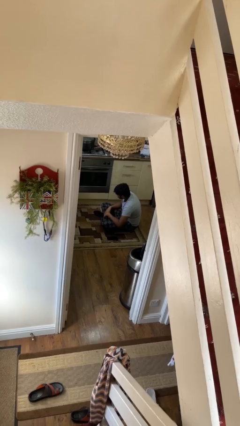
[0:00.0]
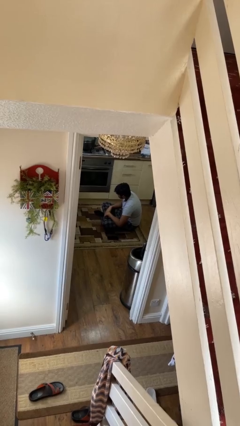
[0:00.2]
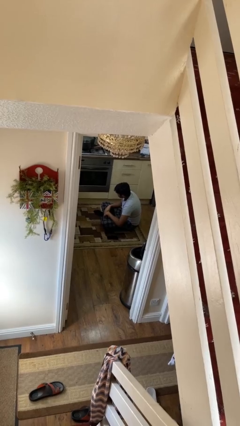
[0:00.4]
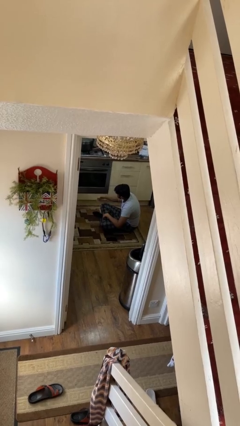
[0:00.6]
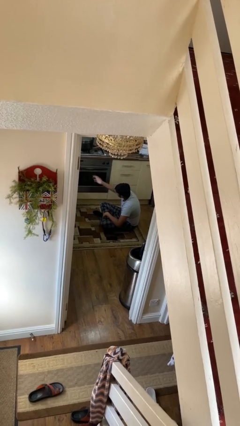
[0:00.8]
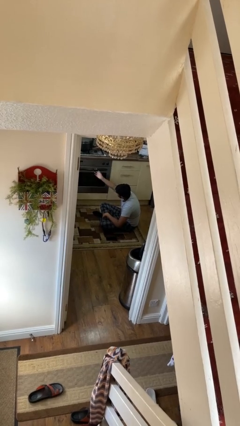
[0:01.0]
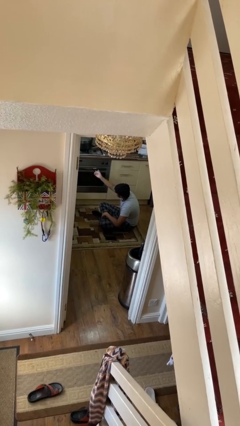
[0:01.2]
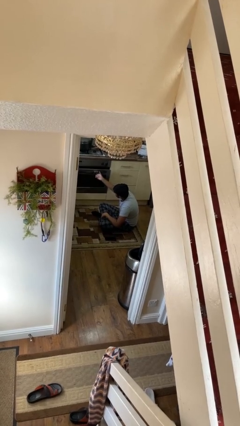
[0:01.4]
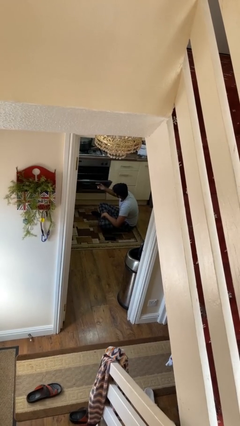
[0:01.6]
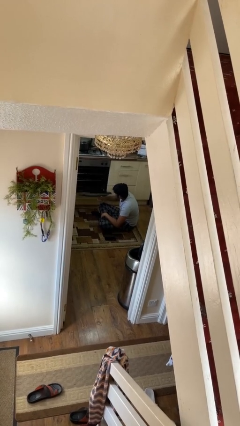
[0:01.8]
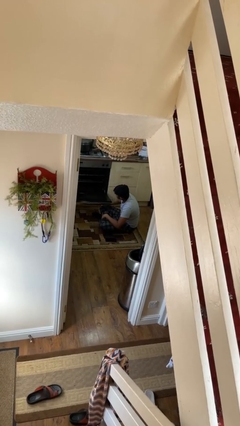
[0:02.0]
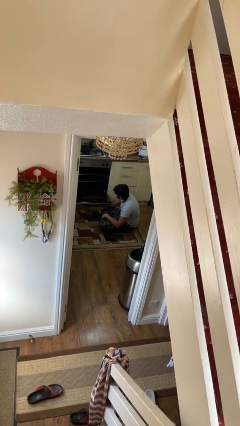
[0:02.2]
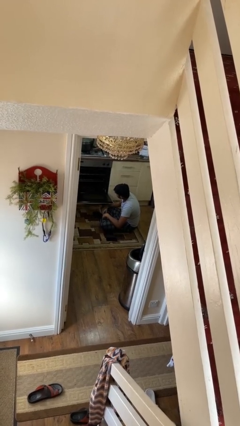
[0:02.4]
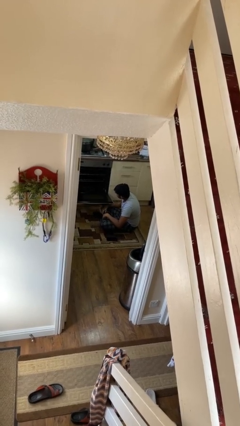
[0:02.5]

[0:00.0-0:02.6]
person opens oven door

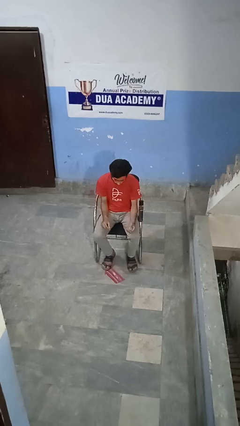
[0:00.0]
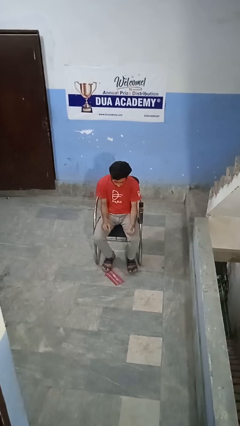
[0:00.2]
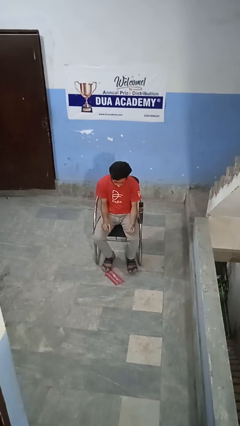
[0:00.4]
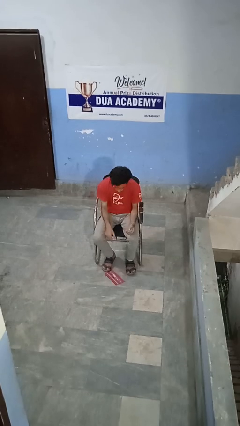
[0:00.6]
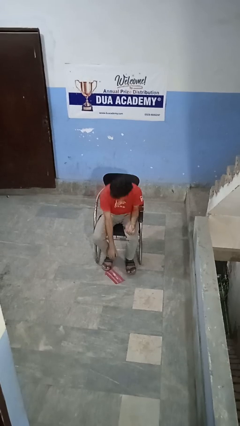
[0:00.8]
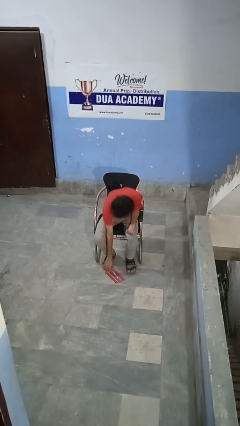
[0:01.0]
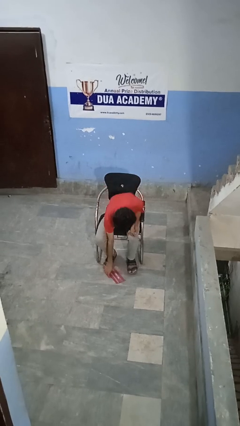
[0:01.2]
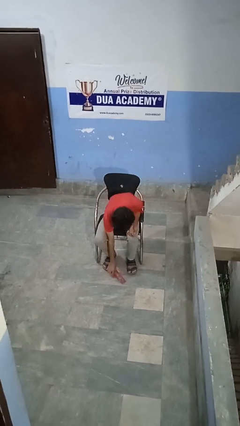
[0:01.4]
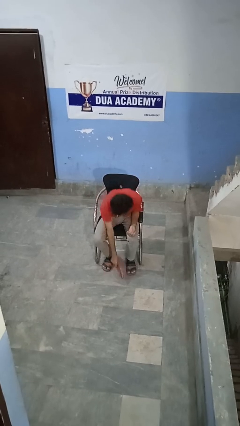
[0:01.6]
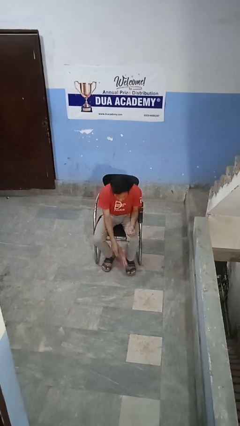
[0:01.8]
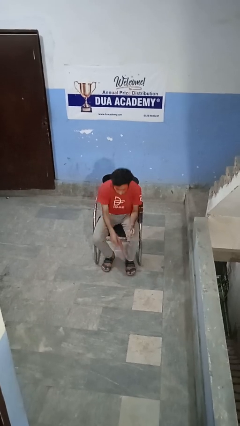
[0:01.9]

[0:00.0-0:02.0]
person picks up object from floor

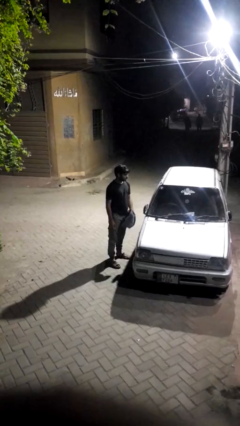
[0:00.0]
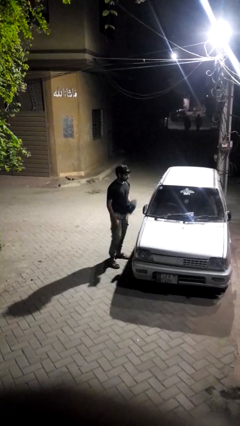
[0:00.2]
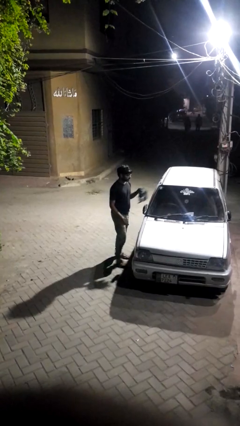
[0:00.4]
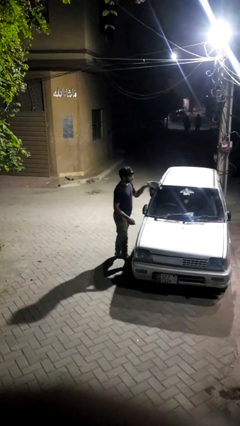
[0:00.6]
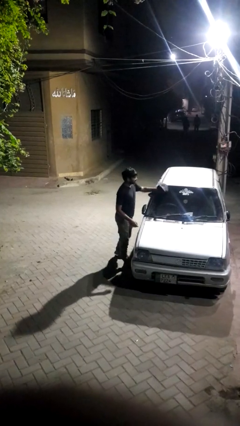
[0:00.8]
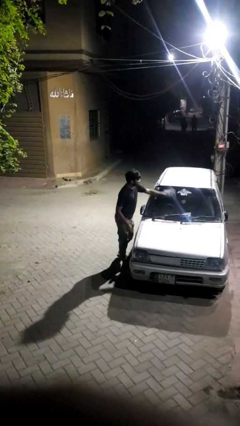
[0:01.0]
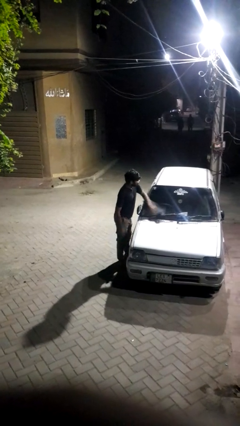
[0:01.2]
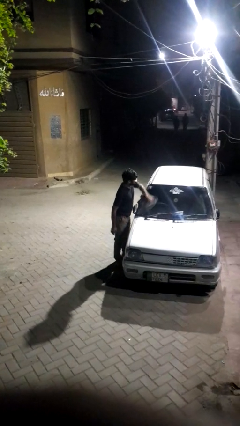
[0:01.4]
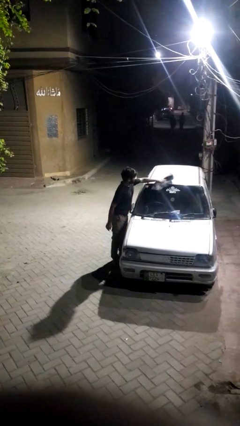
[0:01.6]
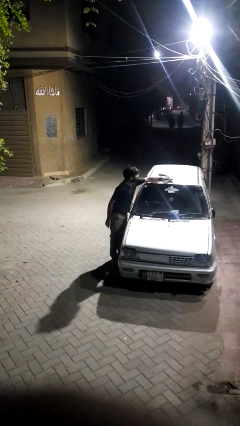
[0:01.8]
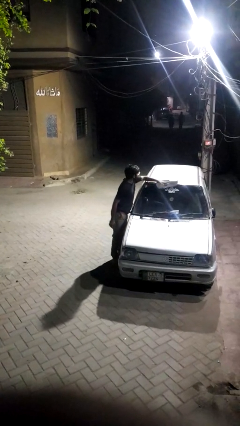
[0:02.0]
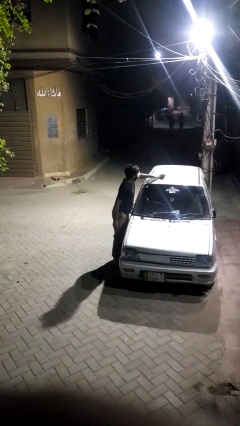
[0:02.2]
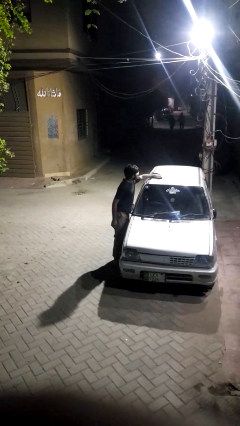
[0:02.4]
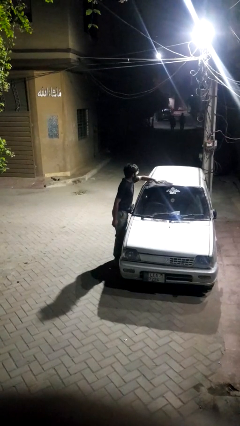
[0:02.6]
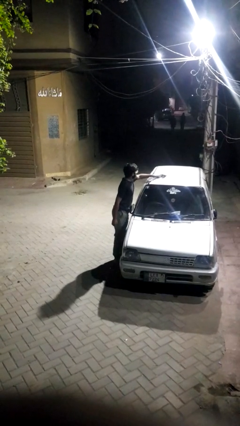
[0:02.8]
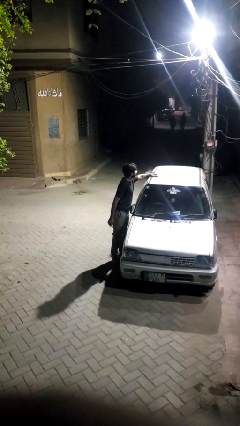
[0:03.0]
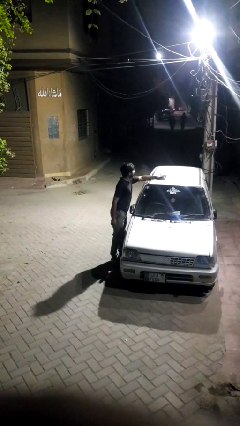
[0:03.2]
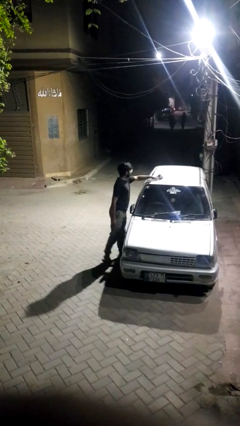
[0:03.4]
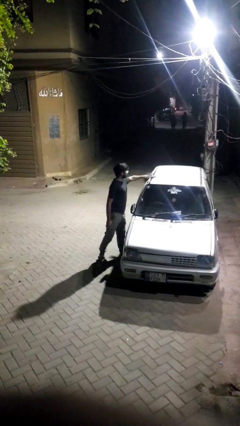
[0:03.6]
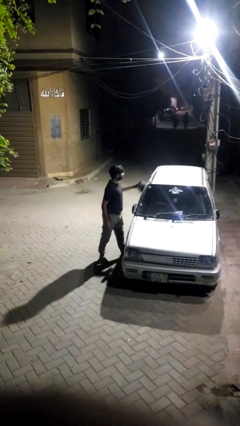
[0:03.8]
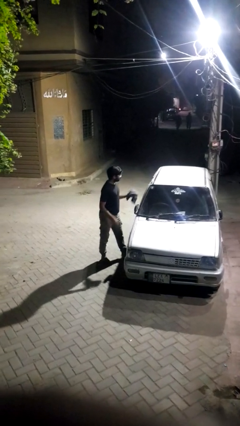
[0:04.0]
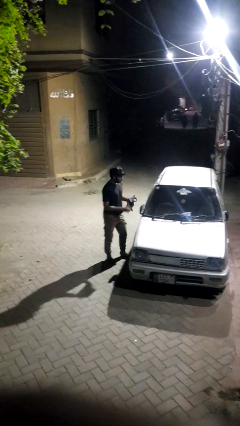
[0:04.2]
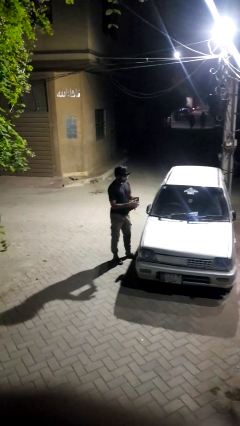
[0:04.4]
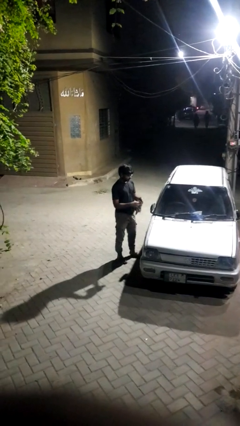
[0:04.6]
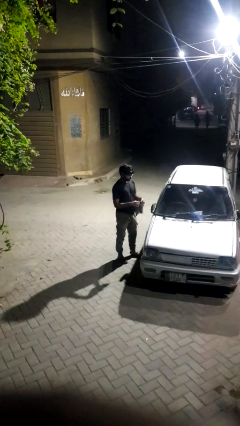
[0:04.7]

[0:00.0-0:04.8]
person polishes car with rag

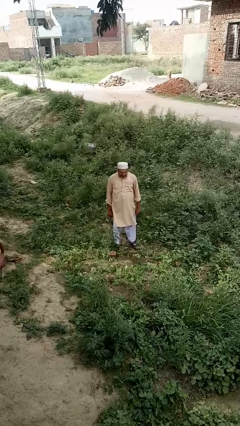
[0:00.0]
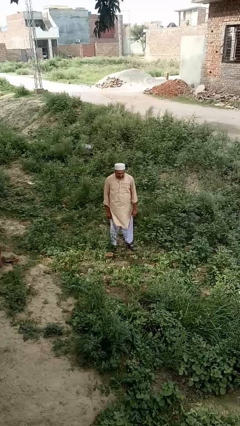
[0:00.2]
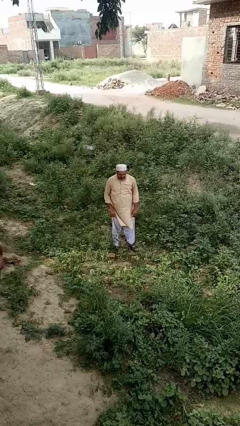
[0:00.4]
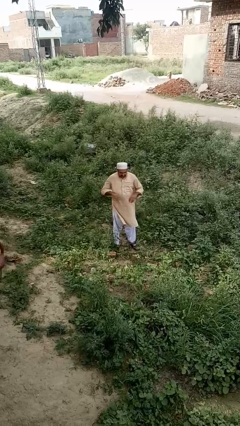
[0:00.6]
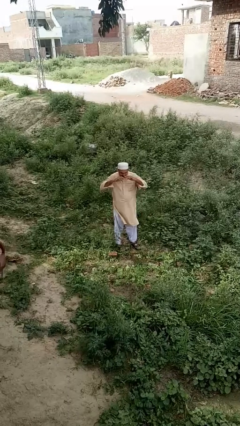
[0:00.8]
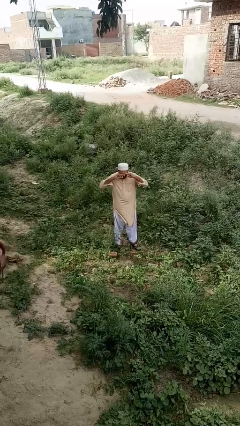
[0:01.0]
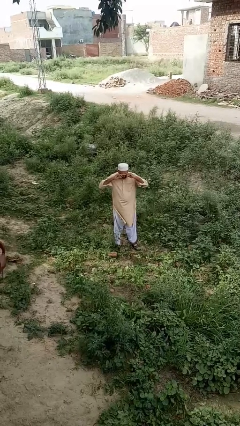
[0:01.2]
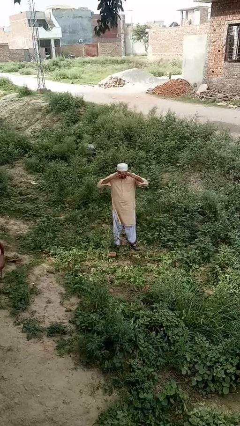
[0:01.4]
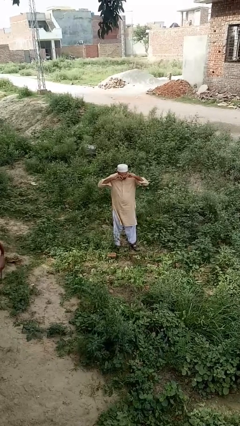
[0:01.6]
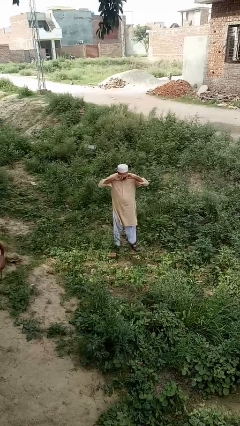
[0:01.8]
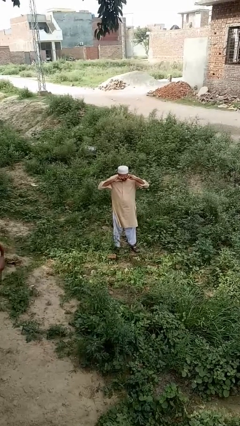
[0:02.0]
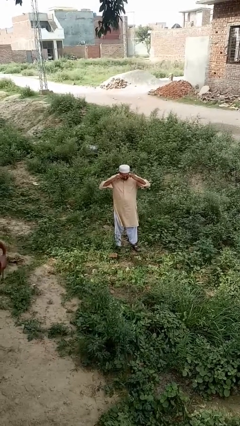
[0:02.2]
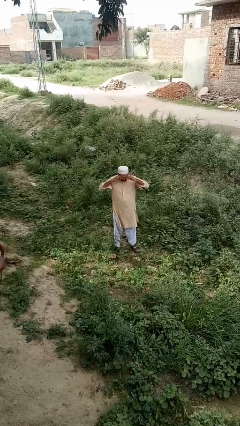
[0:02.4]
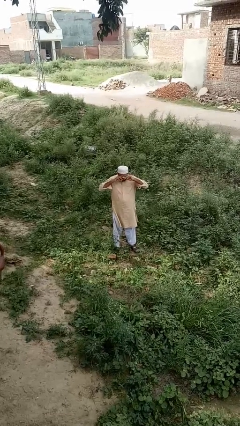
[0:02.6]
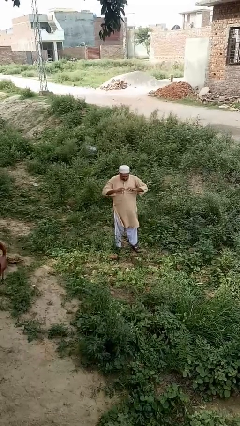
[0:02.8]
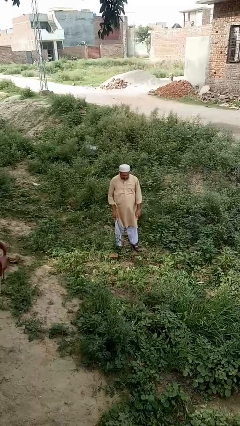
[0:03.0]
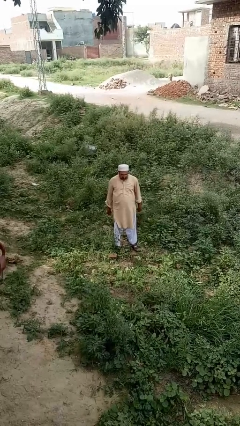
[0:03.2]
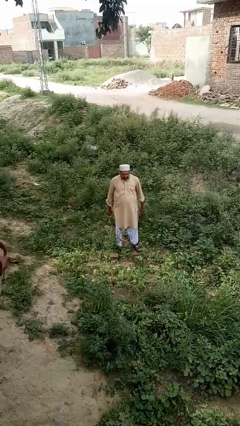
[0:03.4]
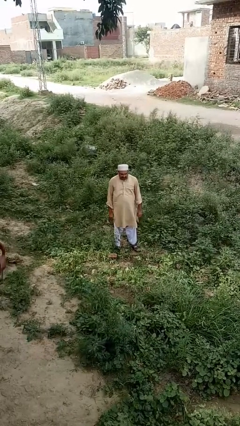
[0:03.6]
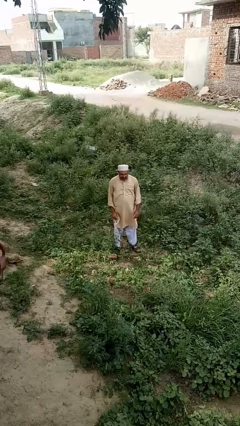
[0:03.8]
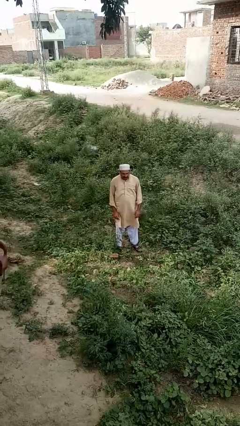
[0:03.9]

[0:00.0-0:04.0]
person rubs eyes

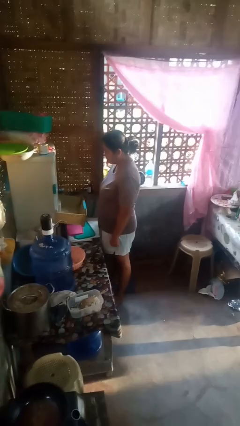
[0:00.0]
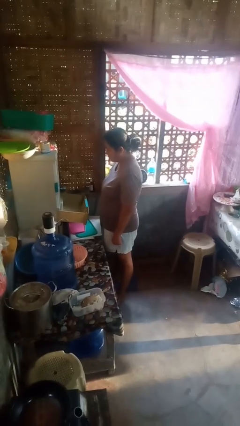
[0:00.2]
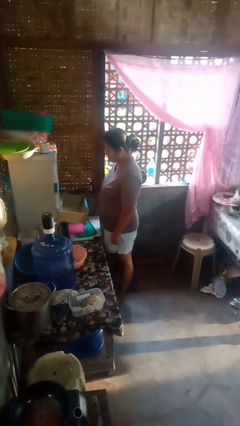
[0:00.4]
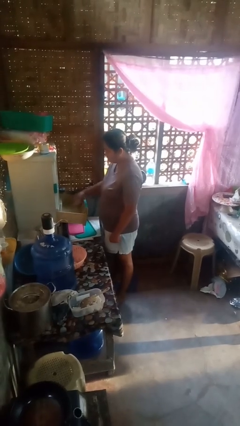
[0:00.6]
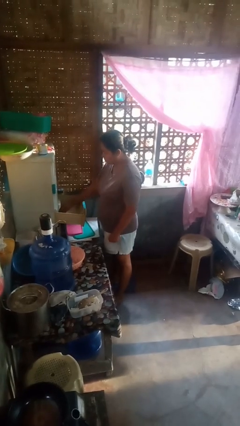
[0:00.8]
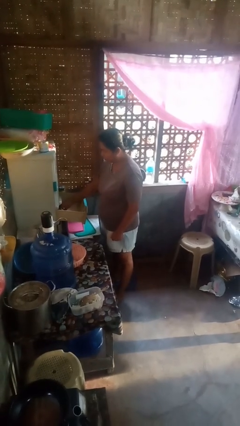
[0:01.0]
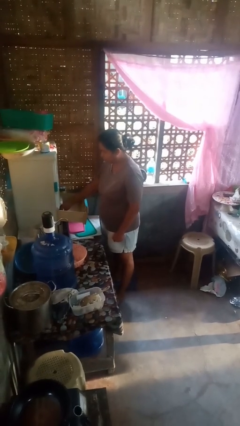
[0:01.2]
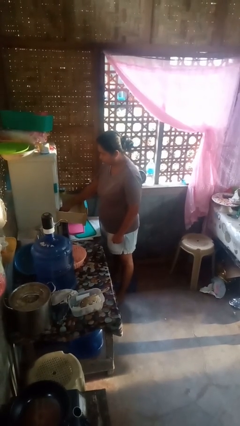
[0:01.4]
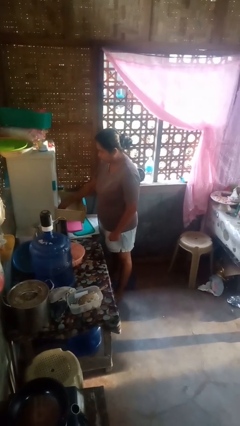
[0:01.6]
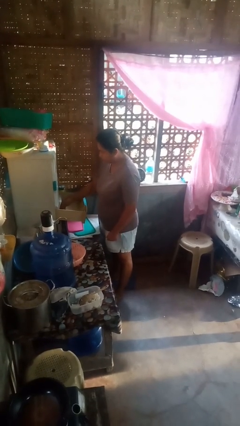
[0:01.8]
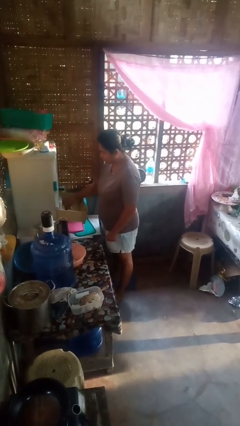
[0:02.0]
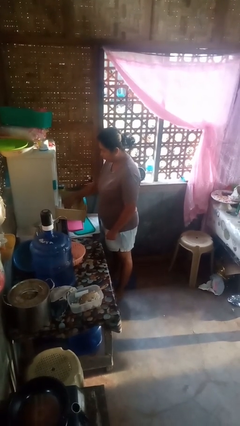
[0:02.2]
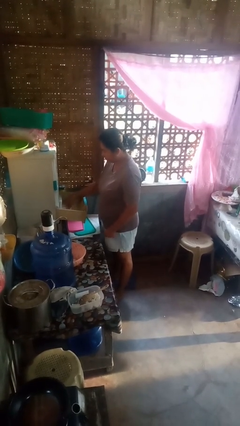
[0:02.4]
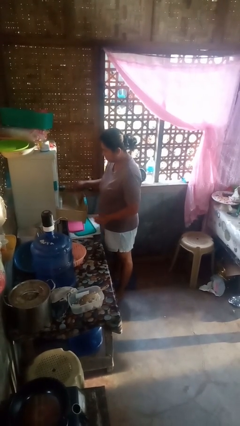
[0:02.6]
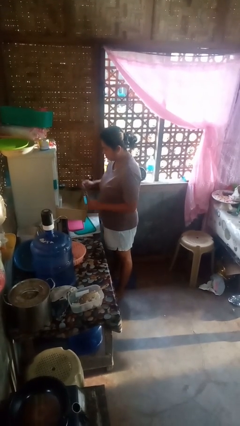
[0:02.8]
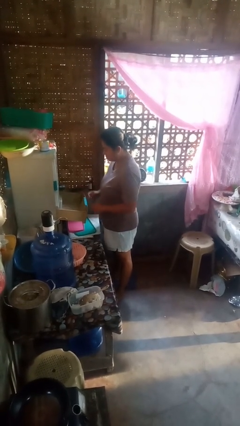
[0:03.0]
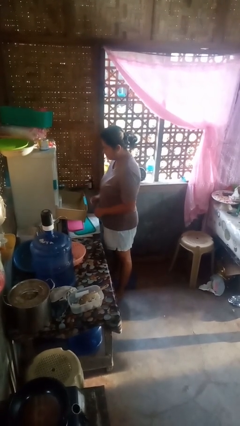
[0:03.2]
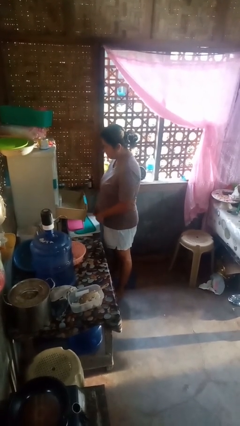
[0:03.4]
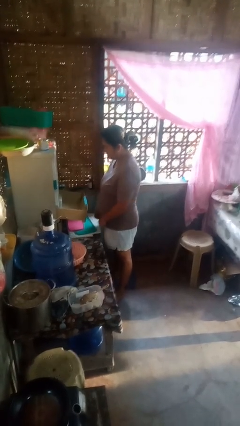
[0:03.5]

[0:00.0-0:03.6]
person takes object from kitchen drawer

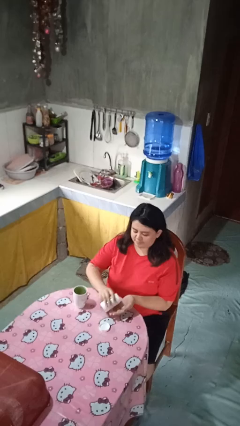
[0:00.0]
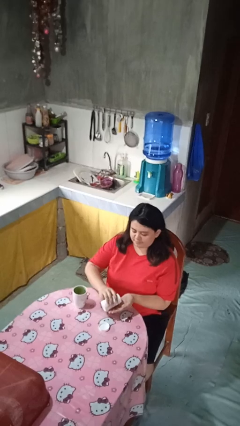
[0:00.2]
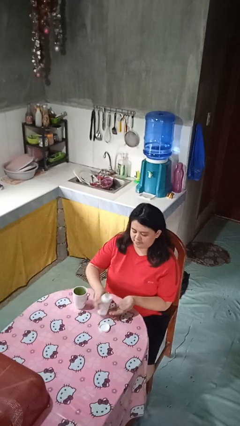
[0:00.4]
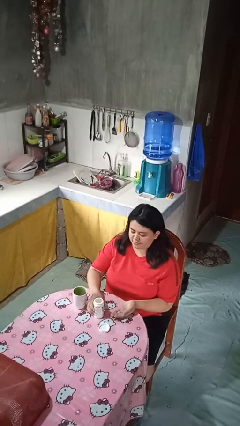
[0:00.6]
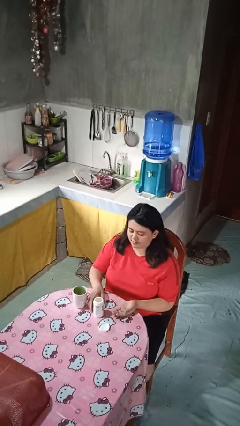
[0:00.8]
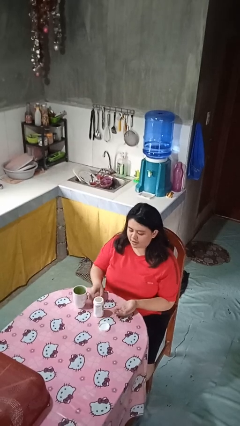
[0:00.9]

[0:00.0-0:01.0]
person takes medicine pills
